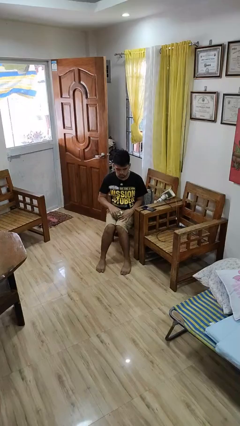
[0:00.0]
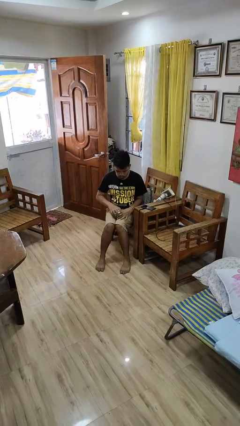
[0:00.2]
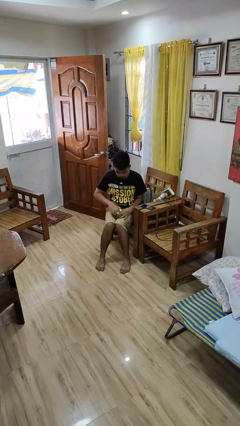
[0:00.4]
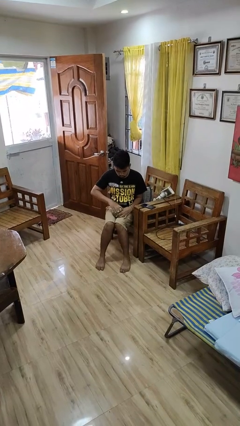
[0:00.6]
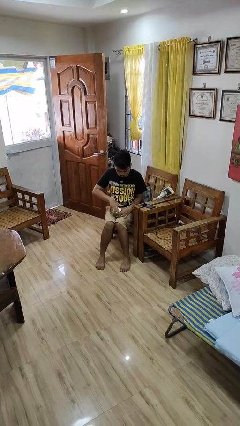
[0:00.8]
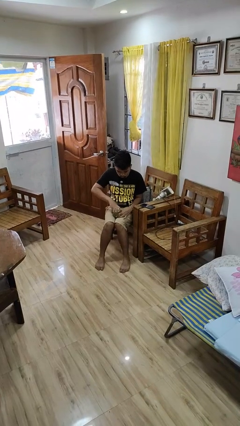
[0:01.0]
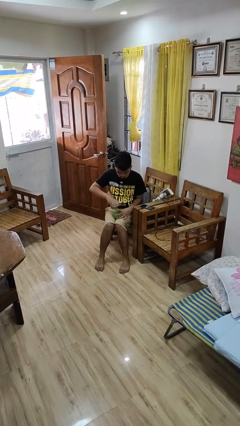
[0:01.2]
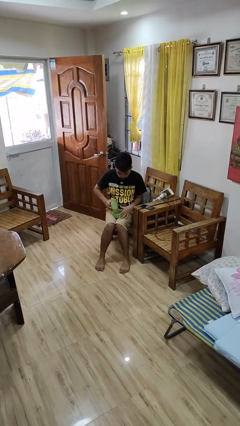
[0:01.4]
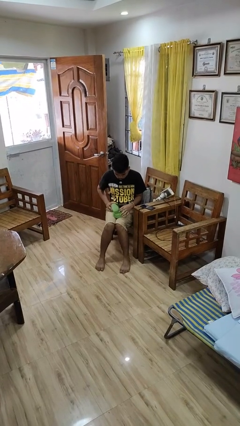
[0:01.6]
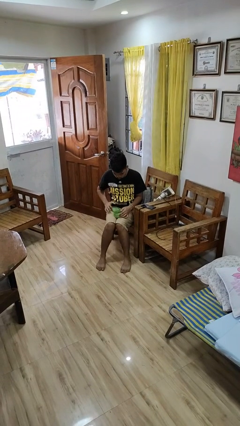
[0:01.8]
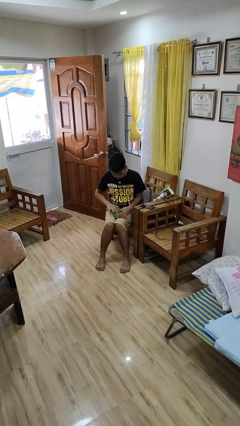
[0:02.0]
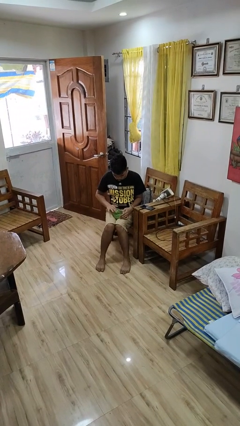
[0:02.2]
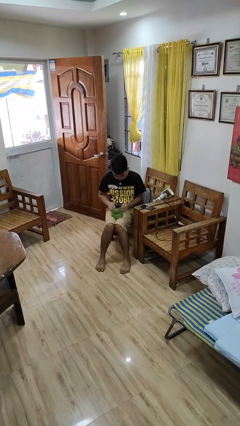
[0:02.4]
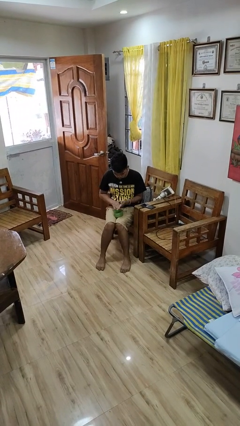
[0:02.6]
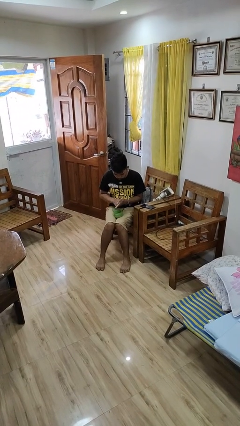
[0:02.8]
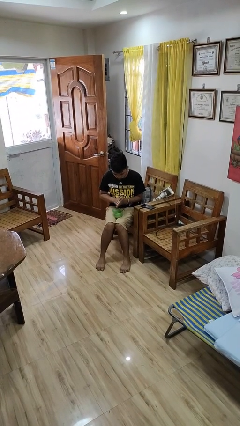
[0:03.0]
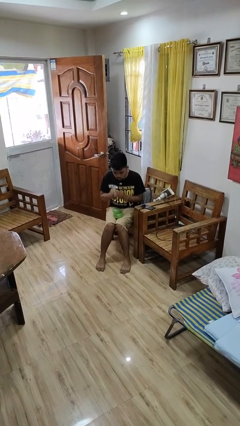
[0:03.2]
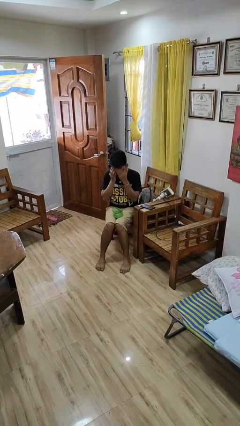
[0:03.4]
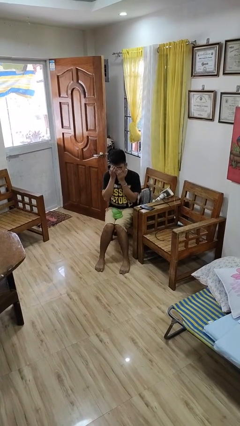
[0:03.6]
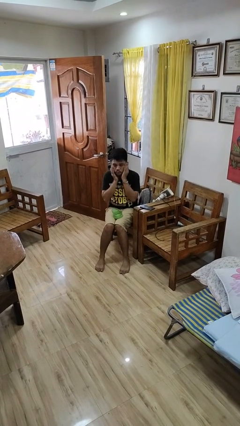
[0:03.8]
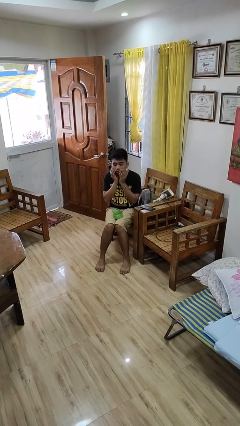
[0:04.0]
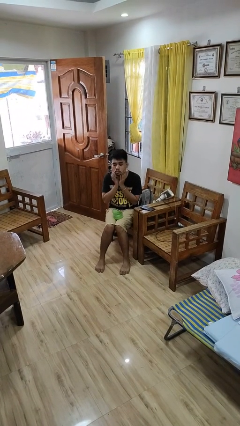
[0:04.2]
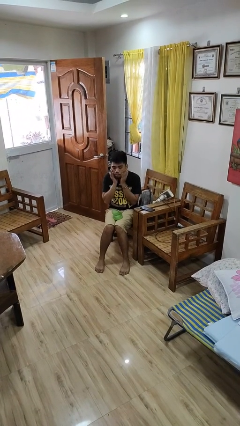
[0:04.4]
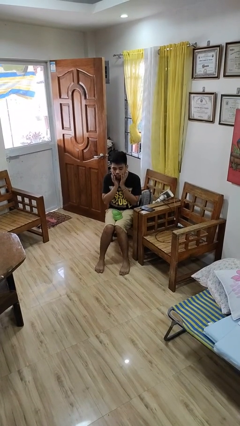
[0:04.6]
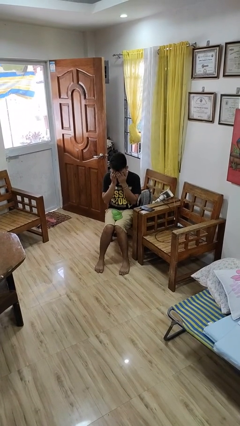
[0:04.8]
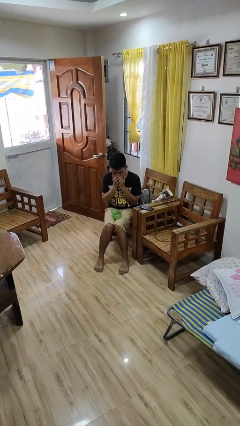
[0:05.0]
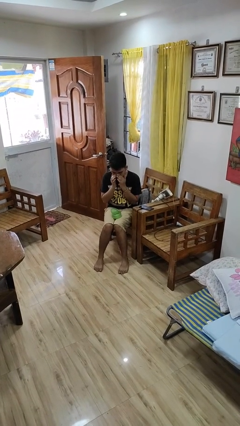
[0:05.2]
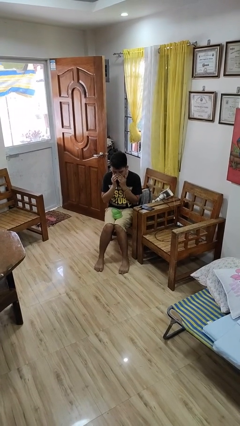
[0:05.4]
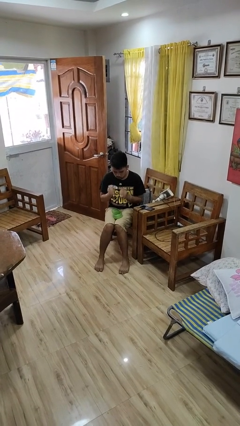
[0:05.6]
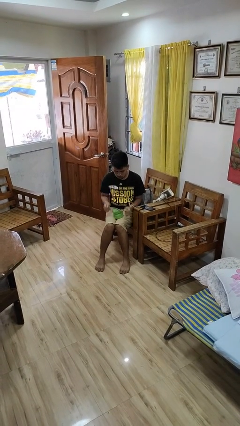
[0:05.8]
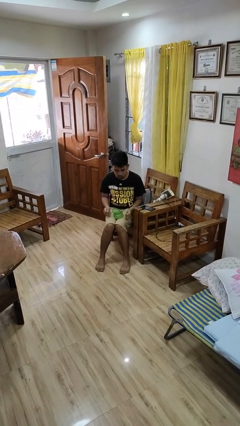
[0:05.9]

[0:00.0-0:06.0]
person applies facial moisturizer

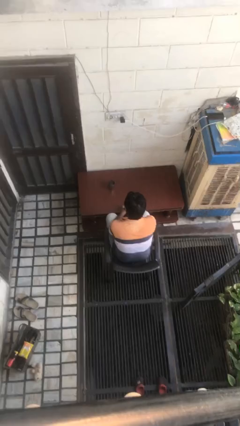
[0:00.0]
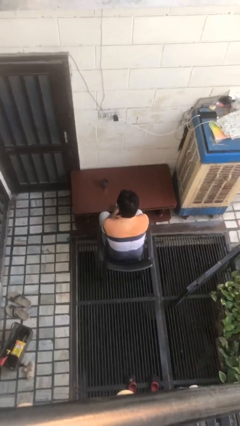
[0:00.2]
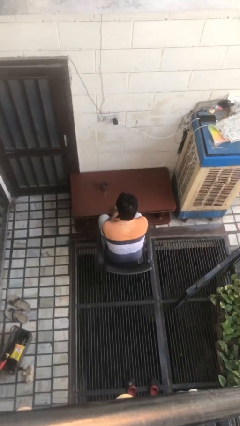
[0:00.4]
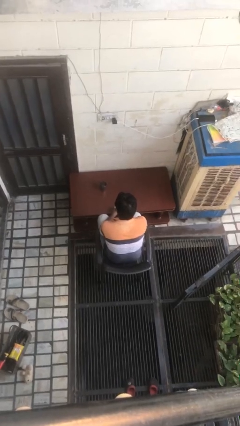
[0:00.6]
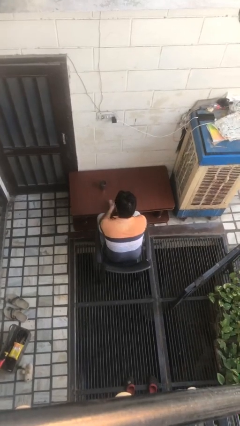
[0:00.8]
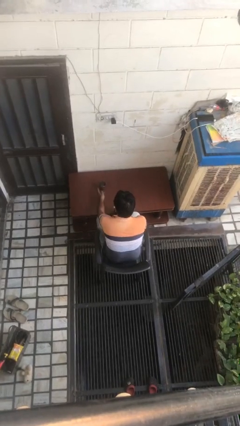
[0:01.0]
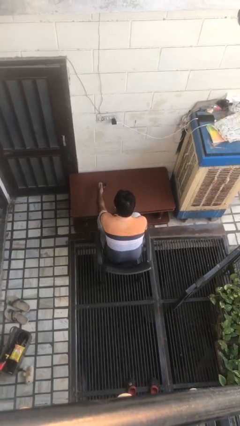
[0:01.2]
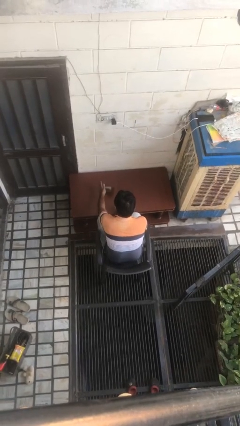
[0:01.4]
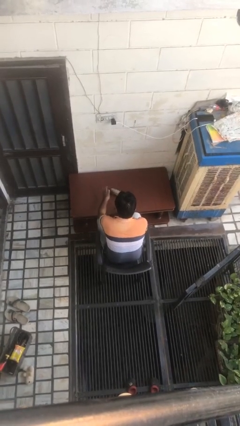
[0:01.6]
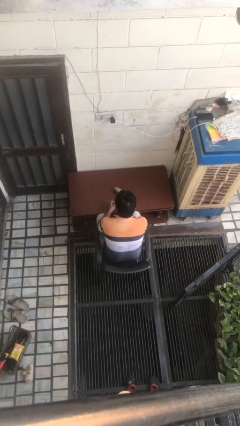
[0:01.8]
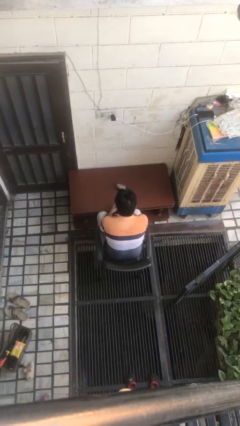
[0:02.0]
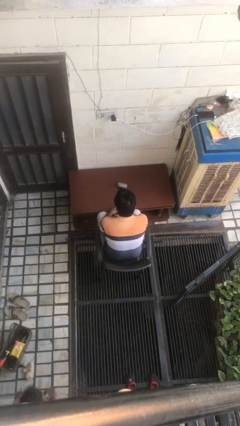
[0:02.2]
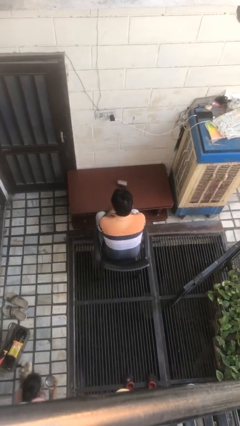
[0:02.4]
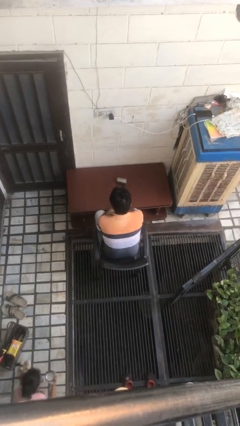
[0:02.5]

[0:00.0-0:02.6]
person knocks over glass

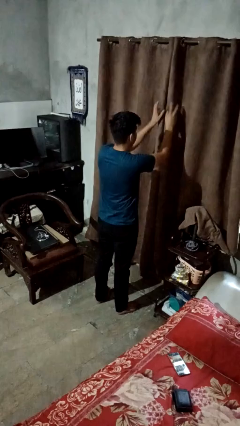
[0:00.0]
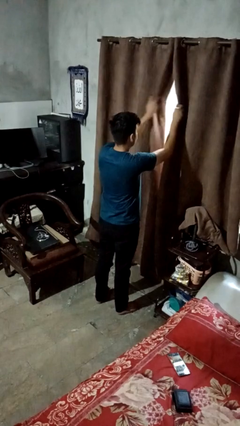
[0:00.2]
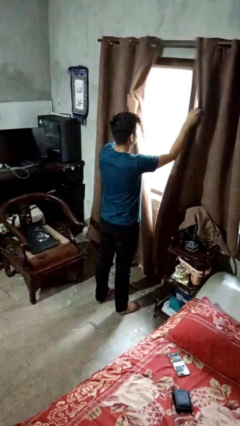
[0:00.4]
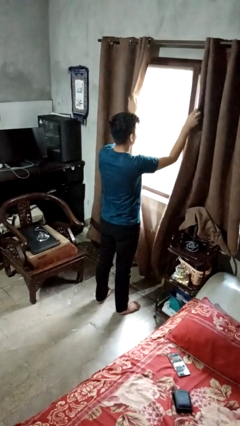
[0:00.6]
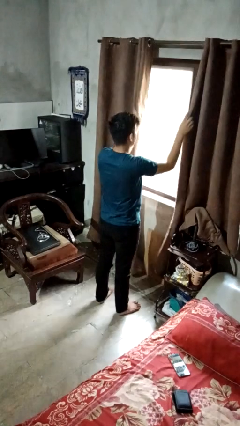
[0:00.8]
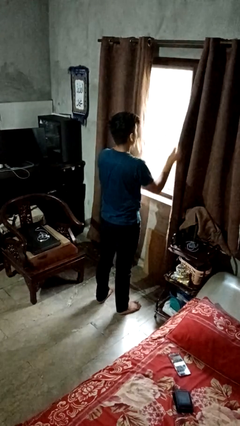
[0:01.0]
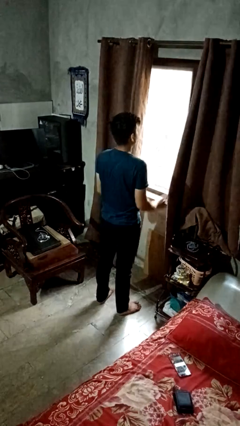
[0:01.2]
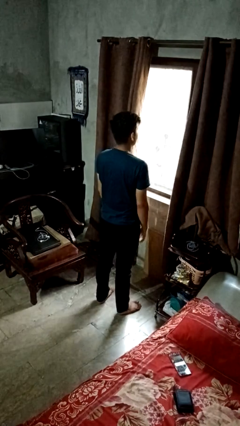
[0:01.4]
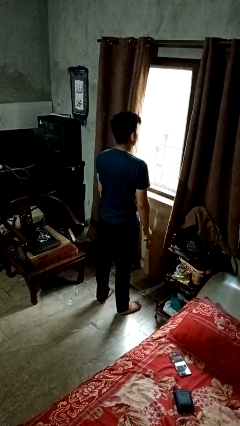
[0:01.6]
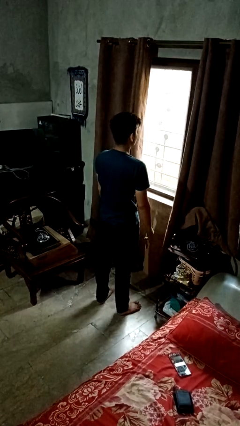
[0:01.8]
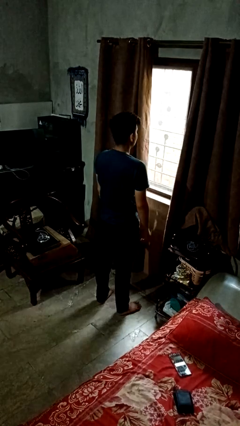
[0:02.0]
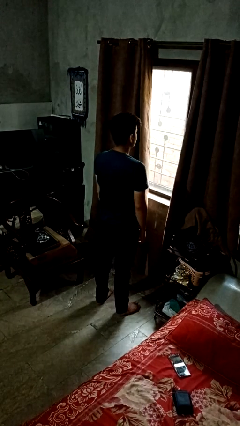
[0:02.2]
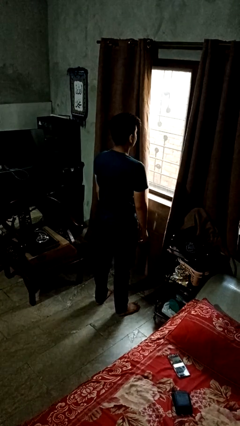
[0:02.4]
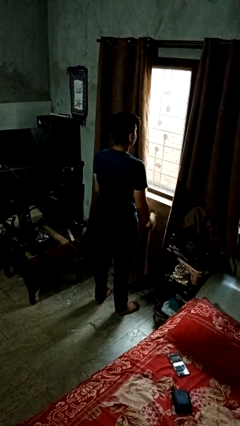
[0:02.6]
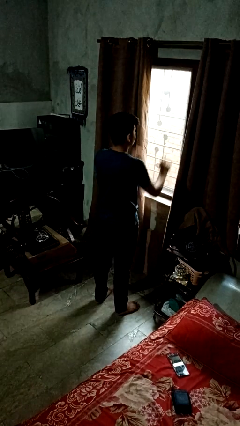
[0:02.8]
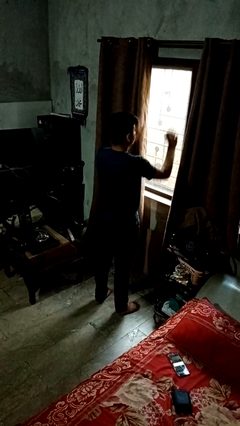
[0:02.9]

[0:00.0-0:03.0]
person opens curtains

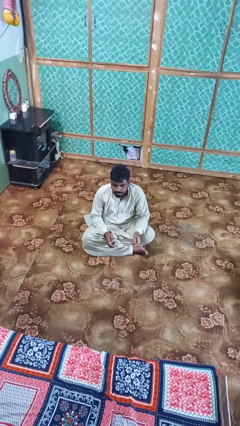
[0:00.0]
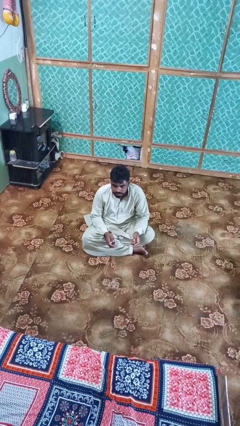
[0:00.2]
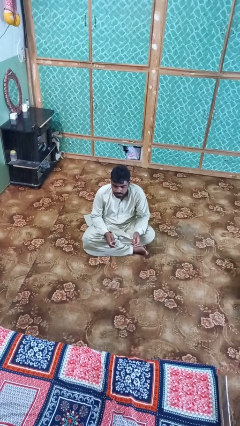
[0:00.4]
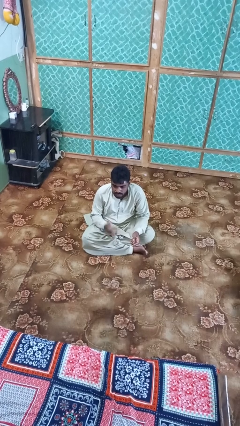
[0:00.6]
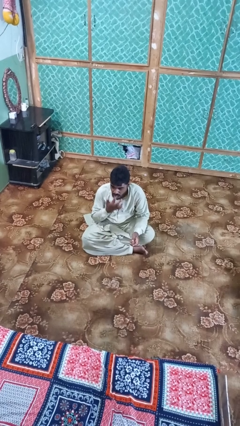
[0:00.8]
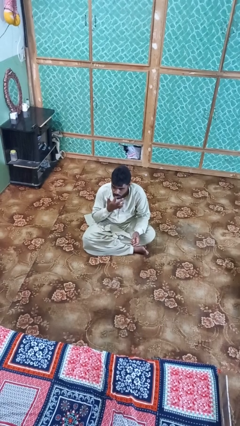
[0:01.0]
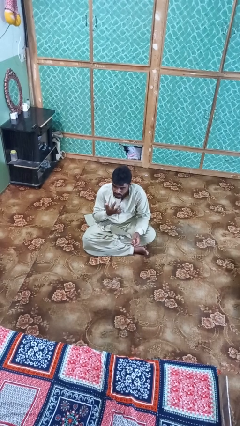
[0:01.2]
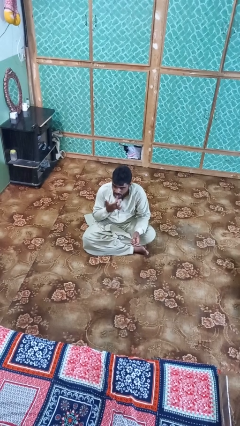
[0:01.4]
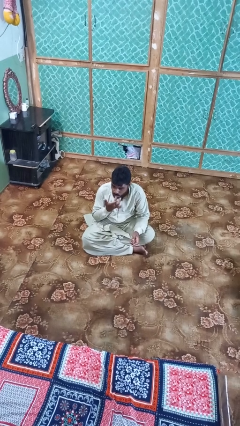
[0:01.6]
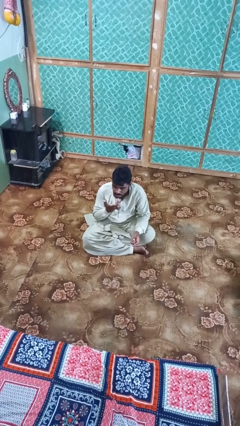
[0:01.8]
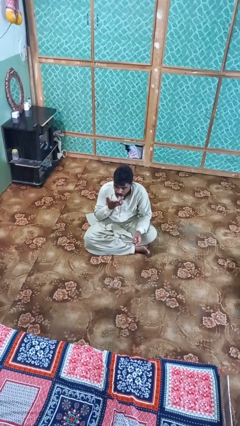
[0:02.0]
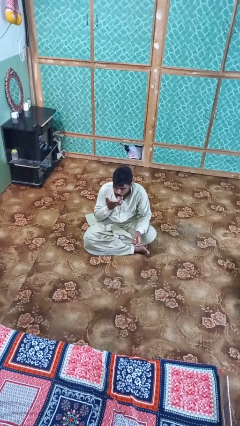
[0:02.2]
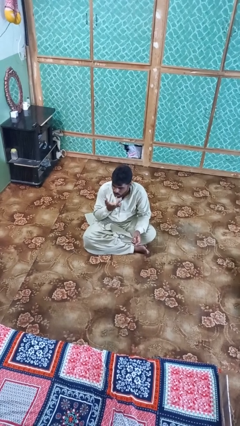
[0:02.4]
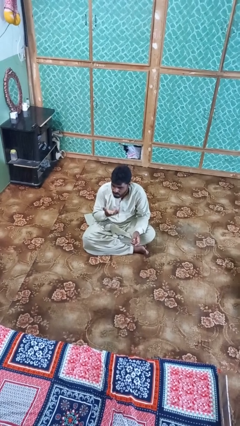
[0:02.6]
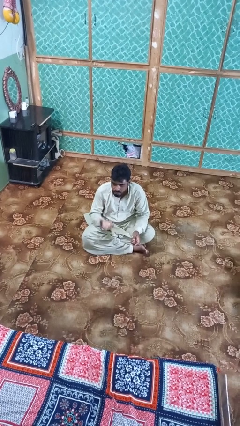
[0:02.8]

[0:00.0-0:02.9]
person licks fingers

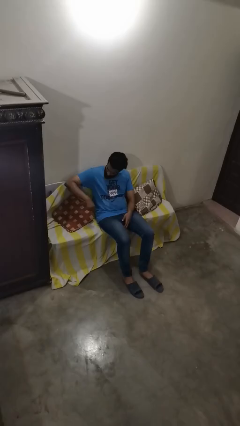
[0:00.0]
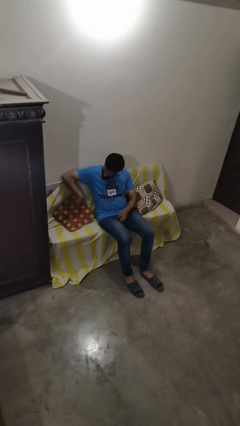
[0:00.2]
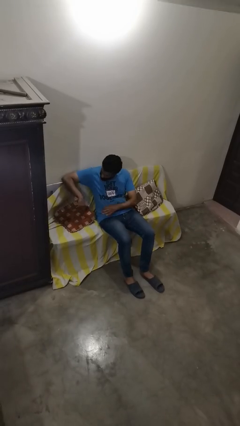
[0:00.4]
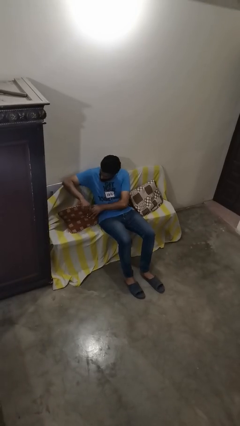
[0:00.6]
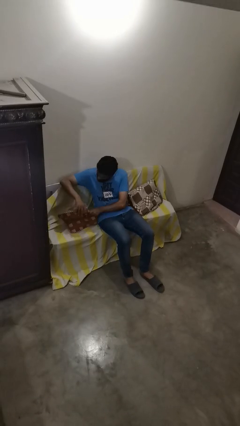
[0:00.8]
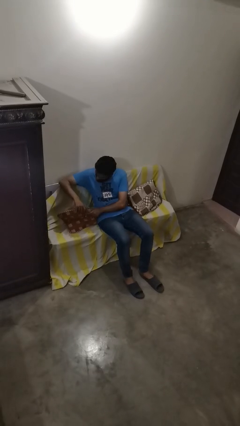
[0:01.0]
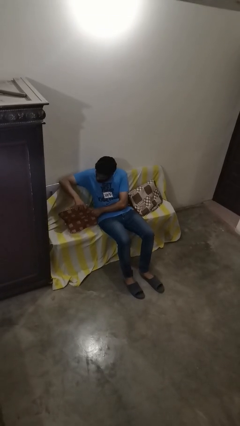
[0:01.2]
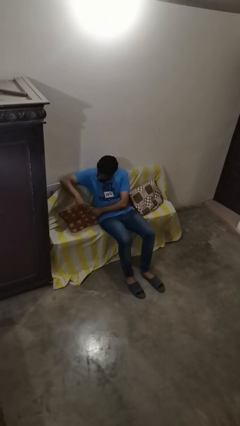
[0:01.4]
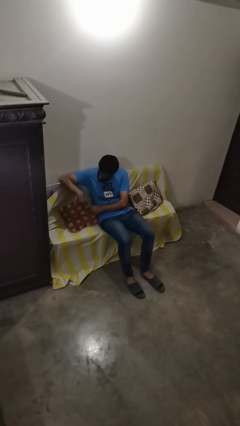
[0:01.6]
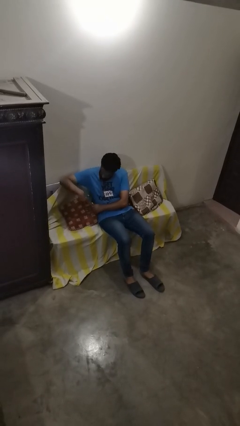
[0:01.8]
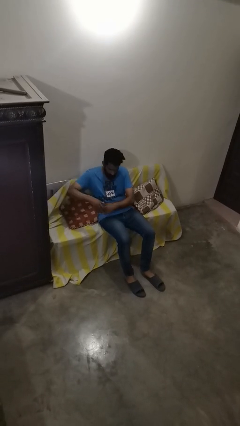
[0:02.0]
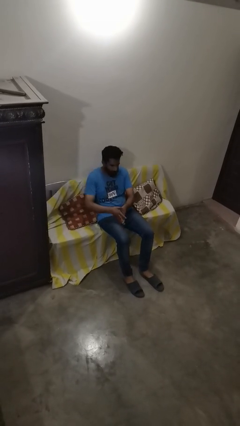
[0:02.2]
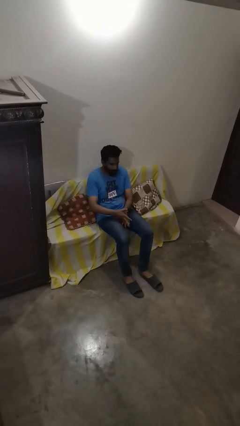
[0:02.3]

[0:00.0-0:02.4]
person searches in couch

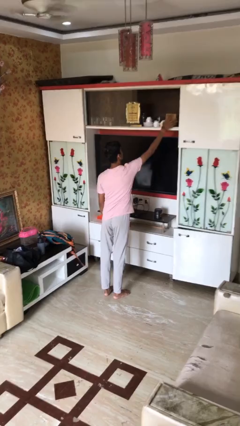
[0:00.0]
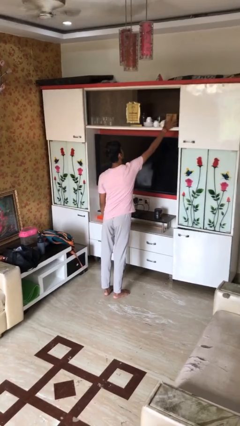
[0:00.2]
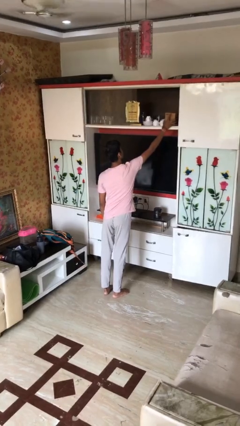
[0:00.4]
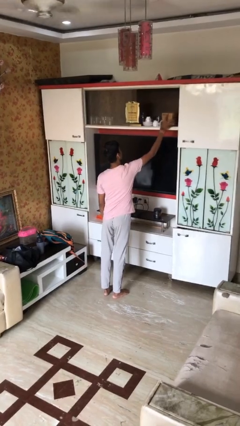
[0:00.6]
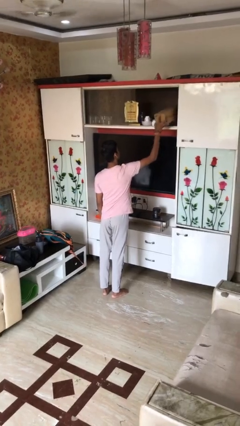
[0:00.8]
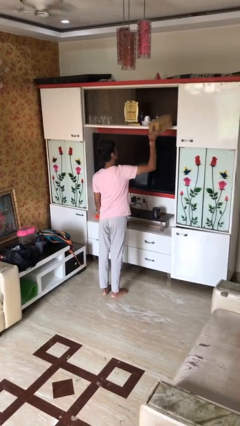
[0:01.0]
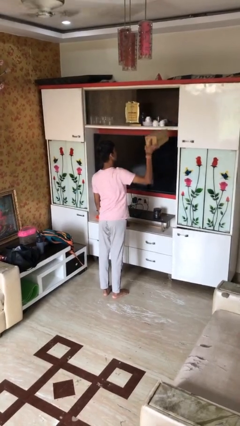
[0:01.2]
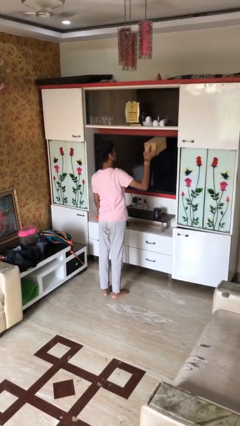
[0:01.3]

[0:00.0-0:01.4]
person picks up object from shelf
